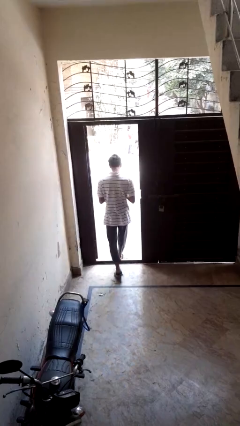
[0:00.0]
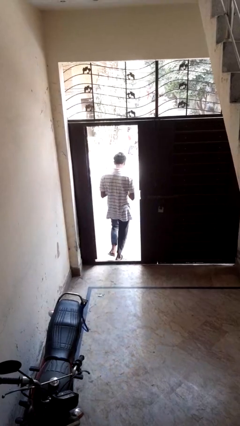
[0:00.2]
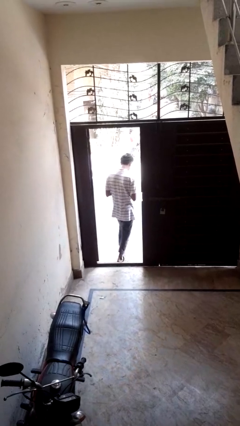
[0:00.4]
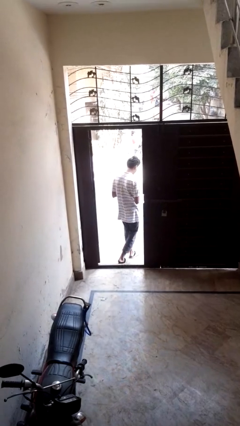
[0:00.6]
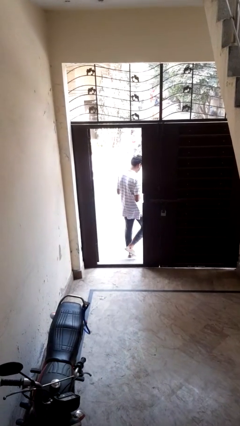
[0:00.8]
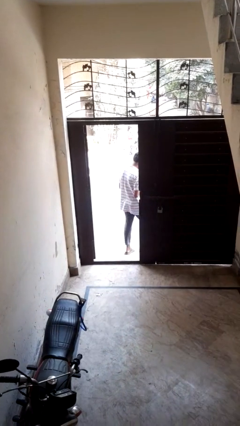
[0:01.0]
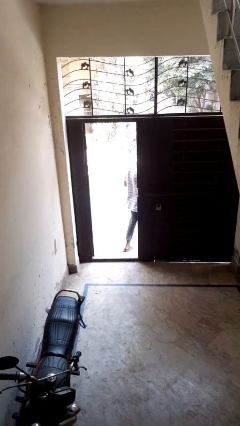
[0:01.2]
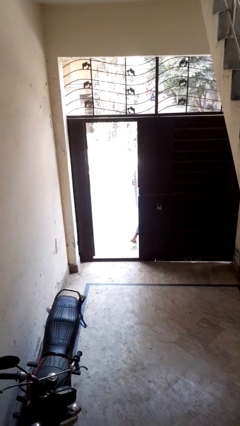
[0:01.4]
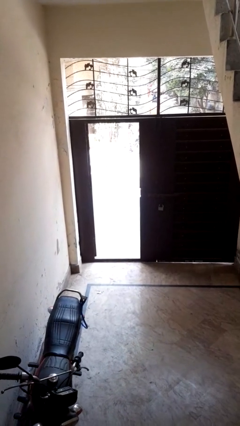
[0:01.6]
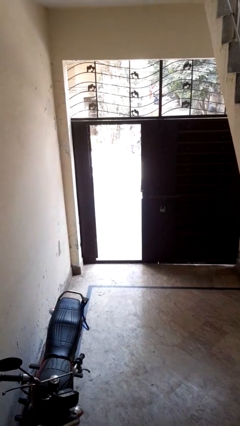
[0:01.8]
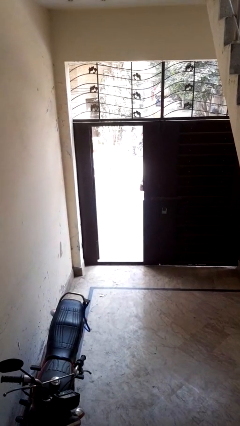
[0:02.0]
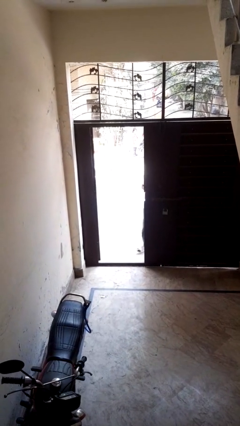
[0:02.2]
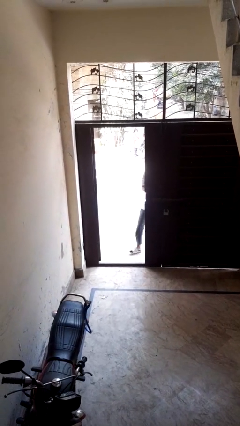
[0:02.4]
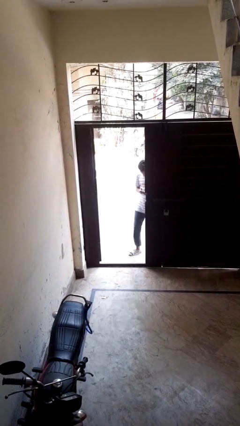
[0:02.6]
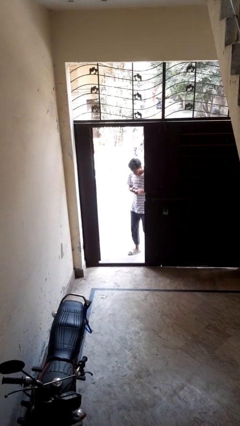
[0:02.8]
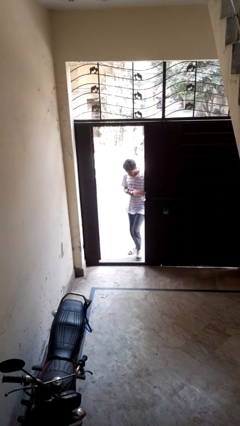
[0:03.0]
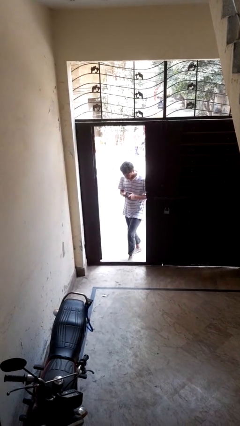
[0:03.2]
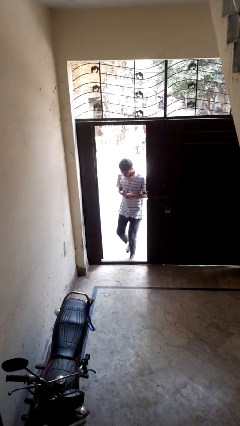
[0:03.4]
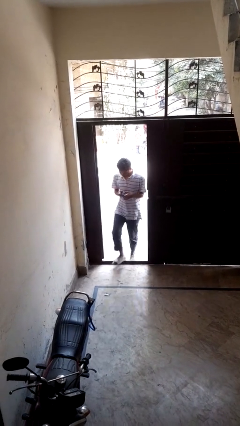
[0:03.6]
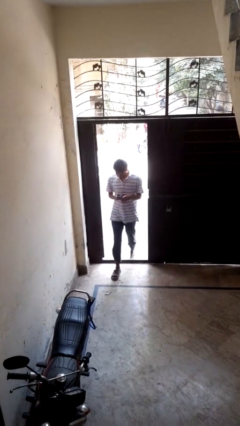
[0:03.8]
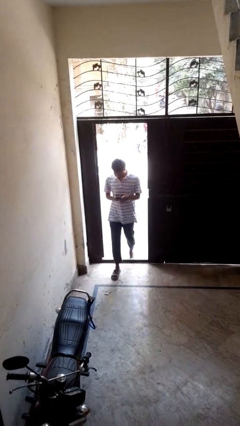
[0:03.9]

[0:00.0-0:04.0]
person exits scene through structure

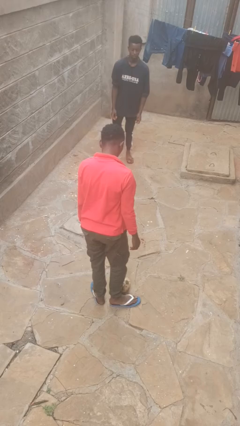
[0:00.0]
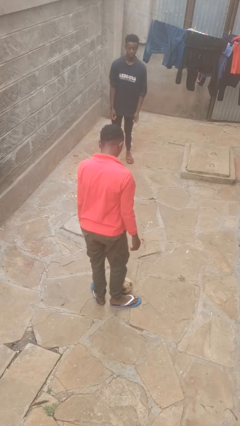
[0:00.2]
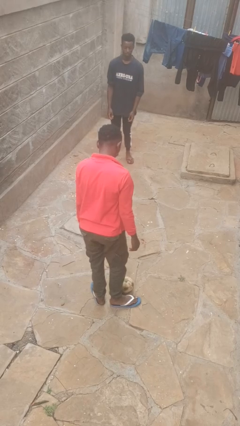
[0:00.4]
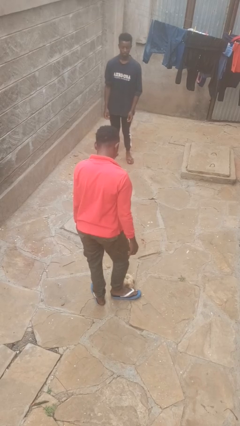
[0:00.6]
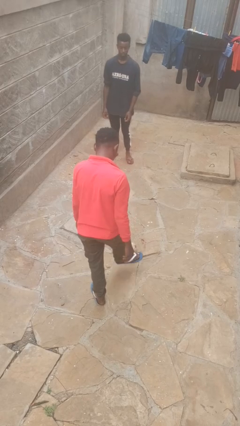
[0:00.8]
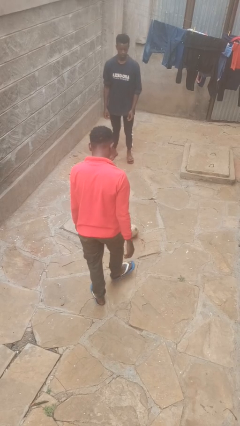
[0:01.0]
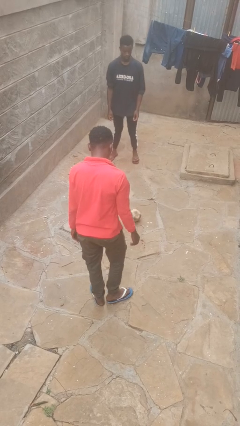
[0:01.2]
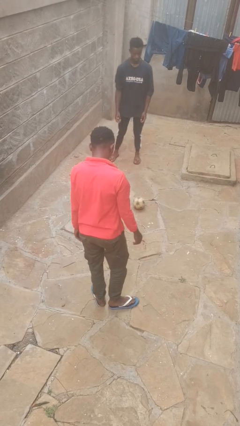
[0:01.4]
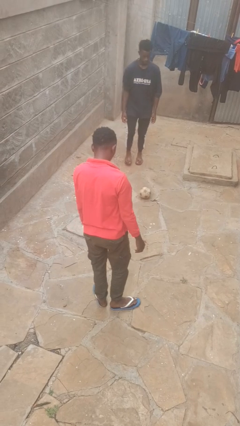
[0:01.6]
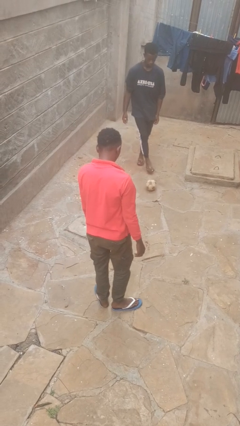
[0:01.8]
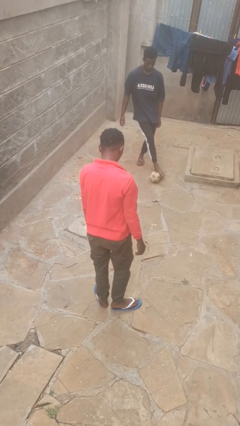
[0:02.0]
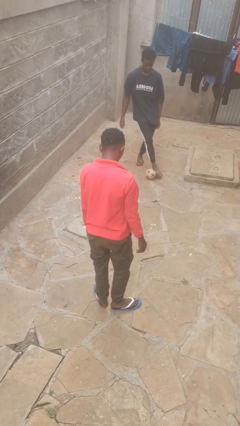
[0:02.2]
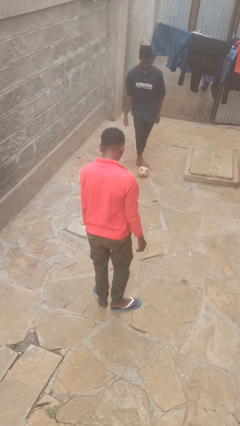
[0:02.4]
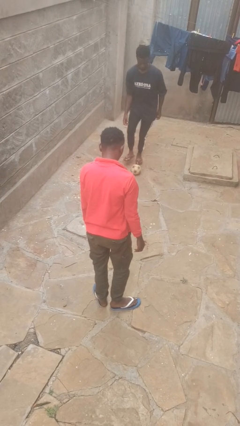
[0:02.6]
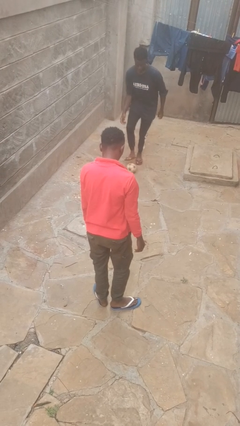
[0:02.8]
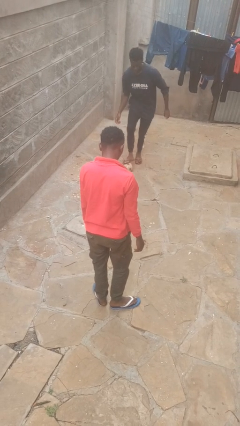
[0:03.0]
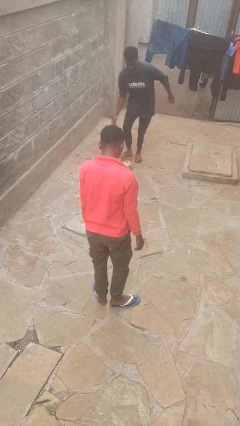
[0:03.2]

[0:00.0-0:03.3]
person kicks object to person

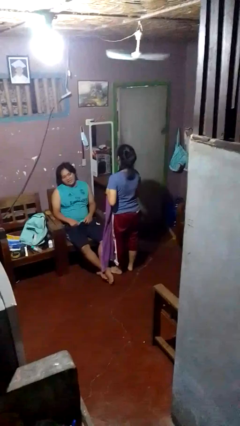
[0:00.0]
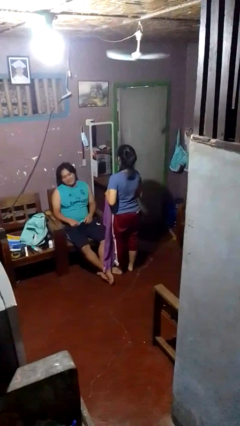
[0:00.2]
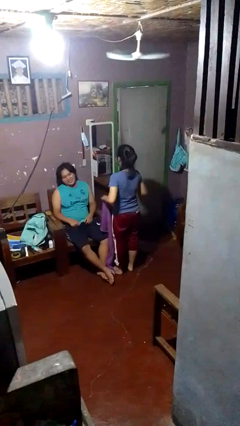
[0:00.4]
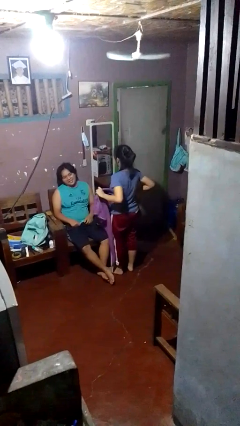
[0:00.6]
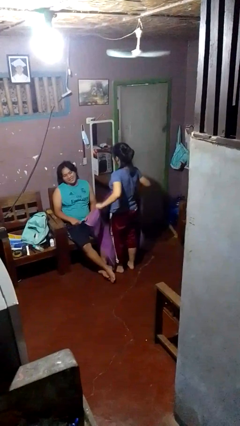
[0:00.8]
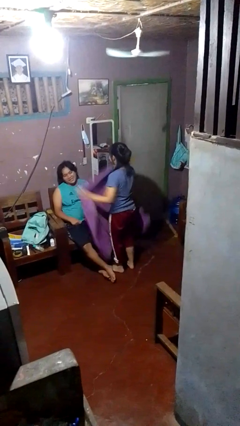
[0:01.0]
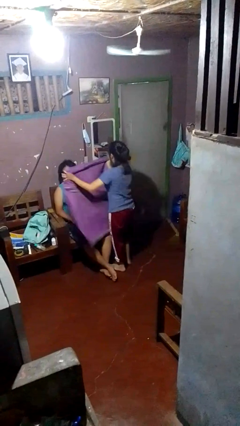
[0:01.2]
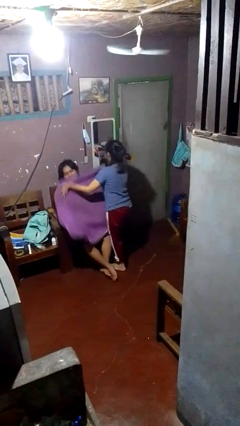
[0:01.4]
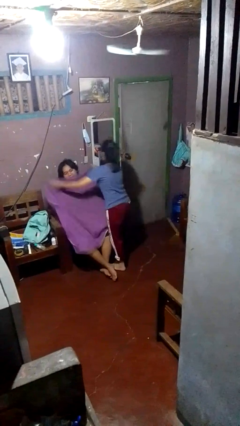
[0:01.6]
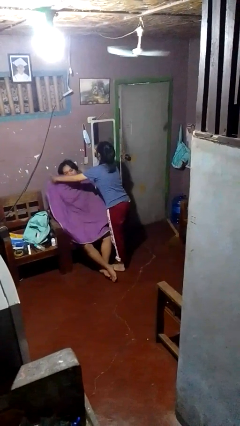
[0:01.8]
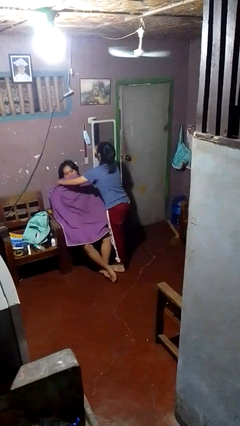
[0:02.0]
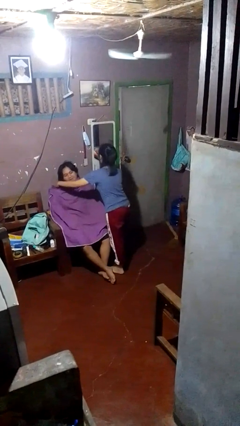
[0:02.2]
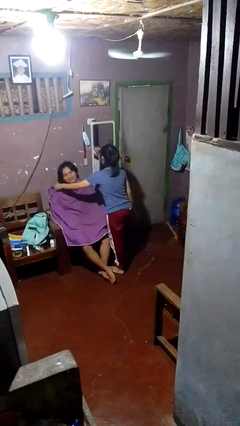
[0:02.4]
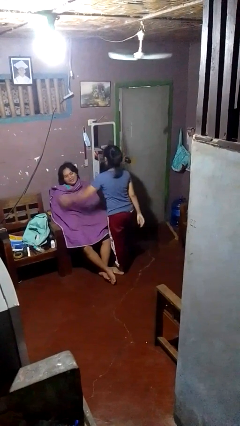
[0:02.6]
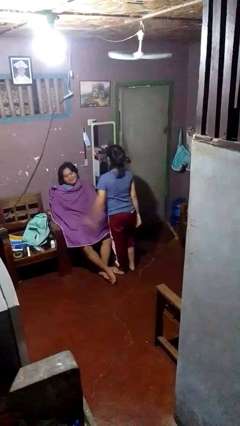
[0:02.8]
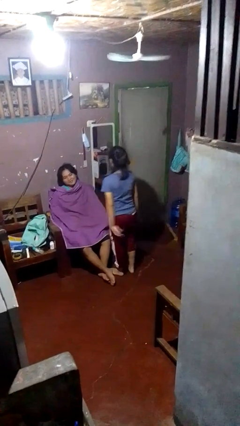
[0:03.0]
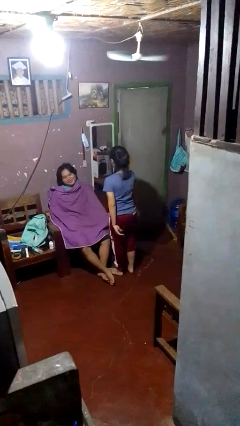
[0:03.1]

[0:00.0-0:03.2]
person covers friend with blanket

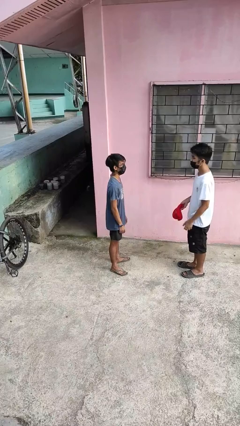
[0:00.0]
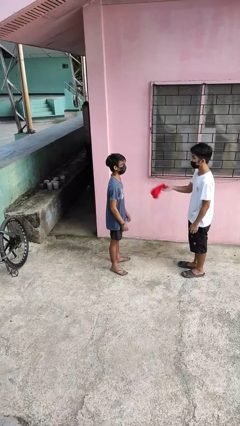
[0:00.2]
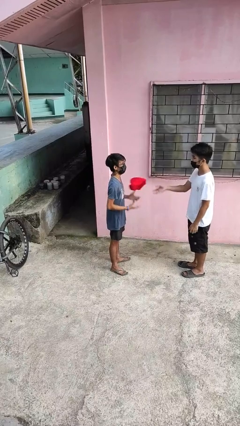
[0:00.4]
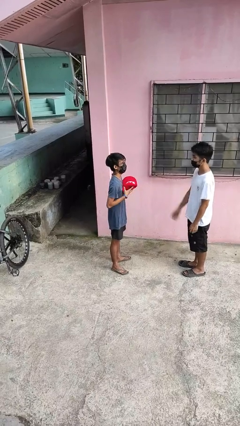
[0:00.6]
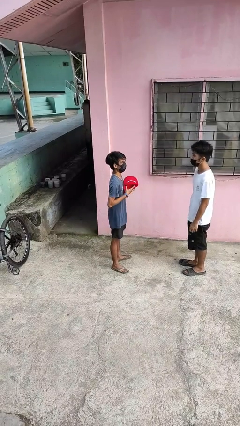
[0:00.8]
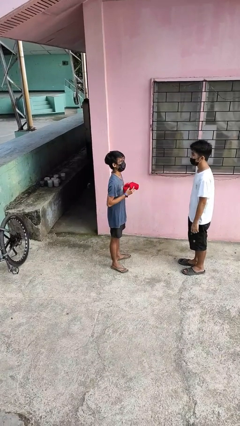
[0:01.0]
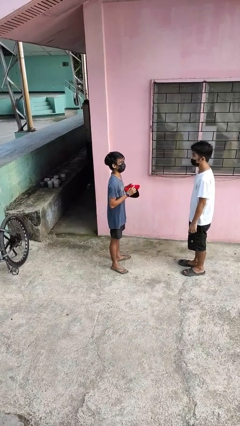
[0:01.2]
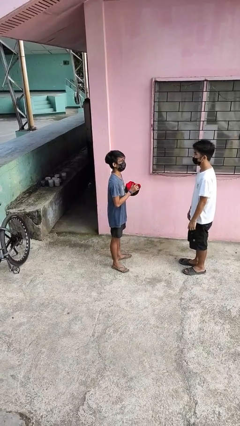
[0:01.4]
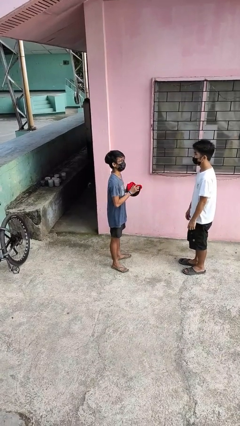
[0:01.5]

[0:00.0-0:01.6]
person catches object from person

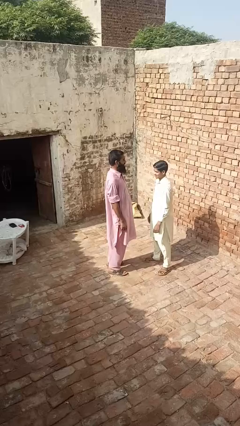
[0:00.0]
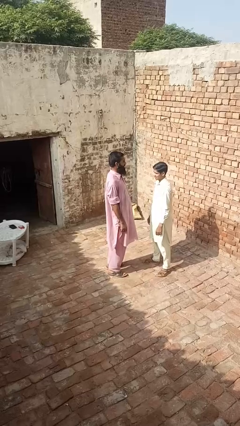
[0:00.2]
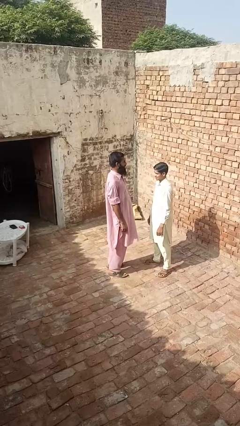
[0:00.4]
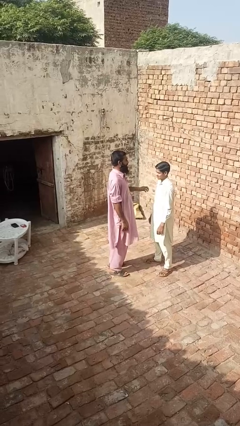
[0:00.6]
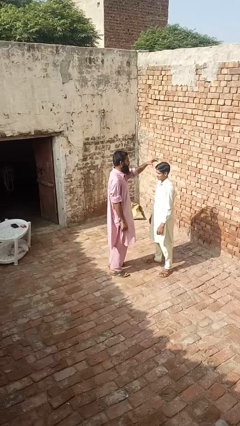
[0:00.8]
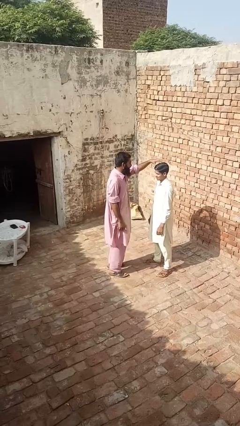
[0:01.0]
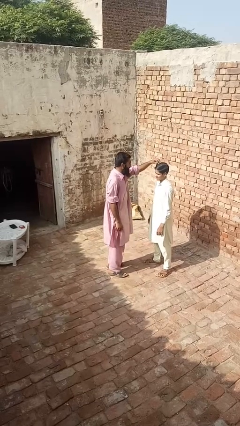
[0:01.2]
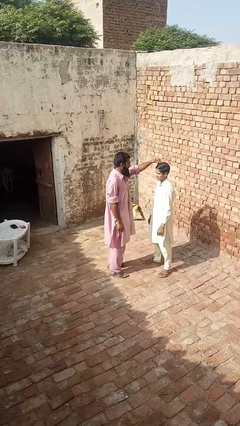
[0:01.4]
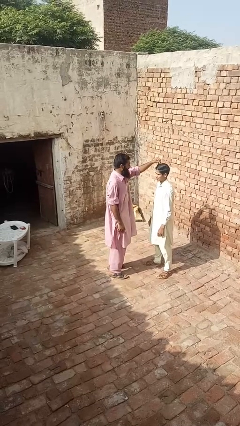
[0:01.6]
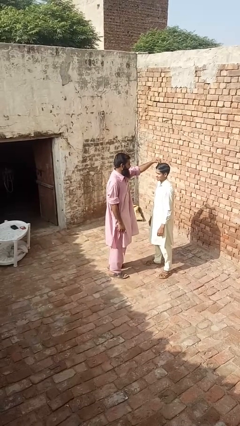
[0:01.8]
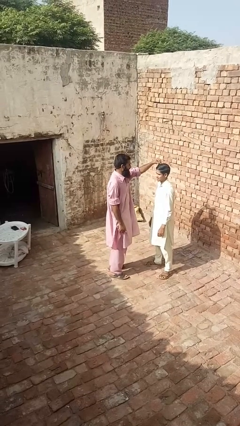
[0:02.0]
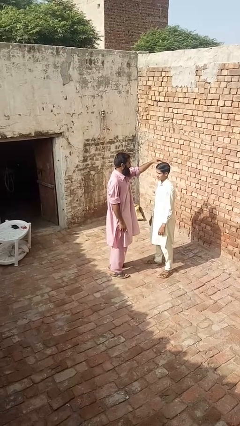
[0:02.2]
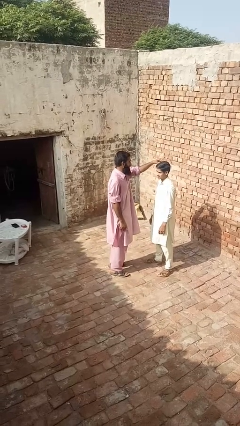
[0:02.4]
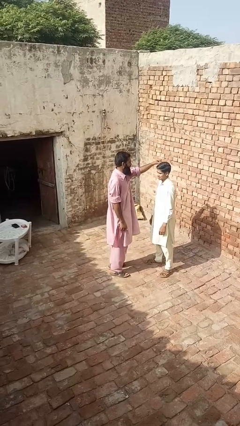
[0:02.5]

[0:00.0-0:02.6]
person grabs person by hair

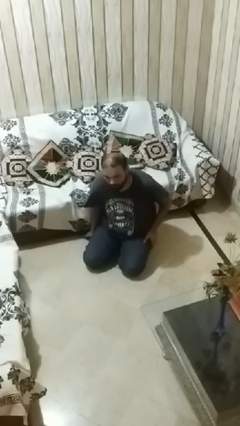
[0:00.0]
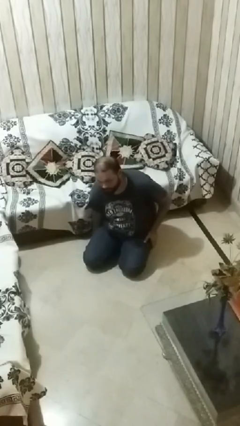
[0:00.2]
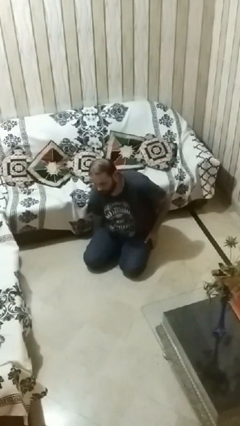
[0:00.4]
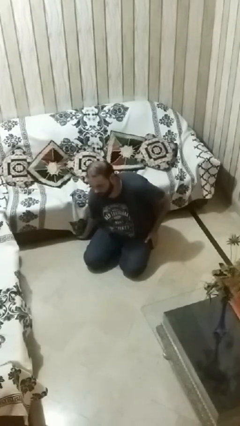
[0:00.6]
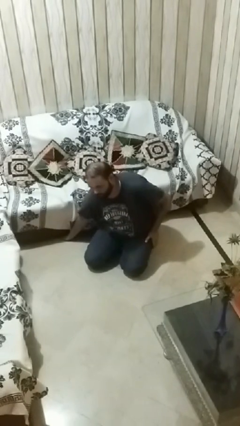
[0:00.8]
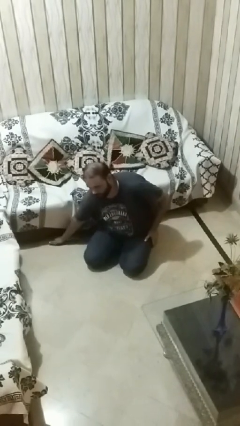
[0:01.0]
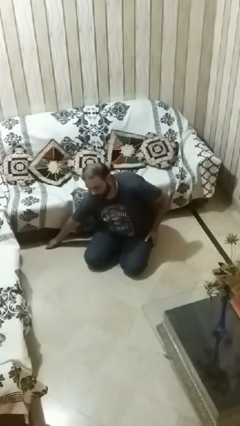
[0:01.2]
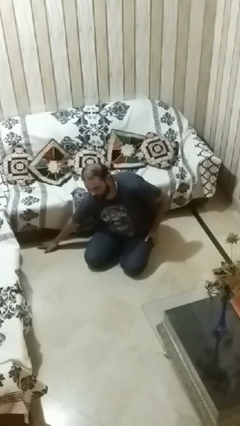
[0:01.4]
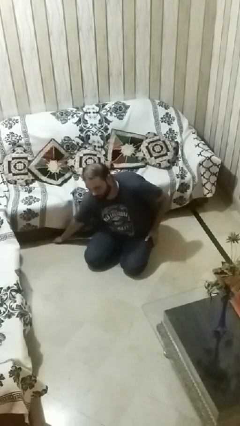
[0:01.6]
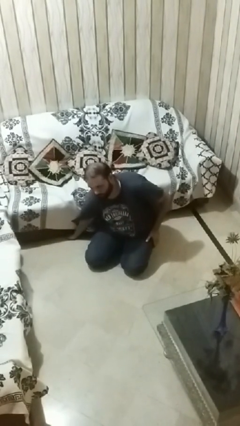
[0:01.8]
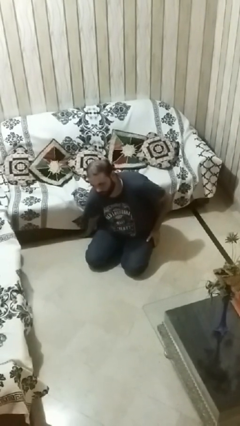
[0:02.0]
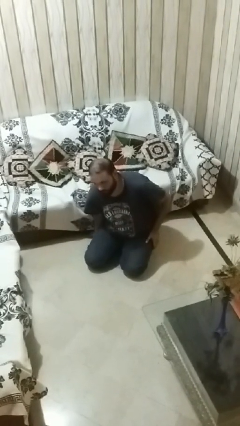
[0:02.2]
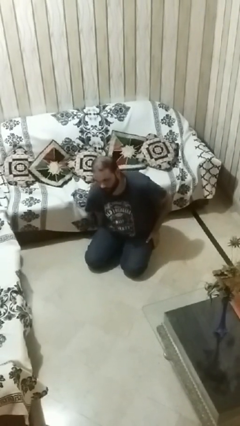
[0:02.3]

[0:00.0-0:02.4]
person searches under couch

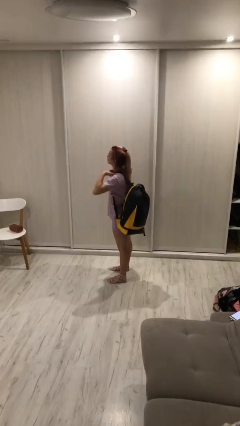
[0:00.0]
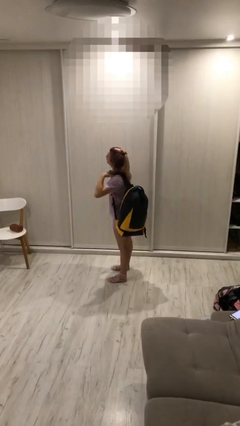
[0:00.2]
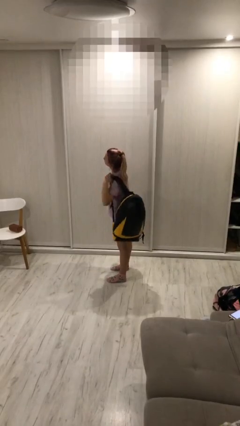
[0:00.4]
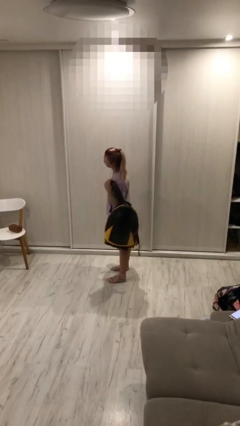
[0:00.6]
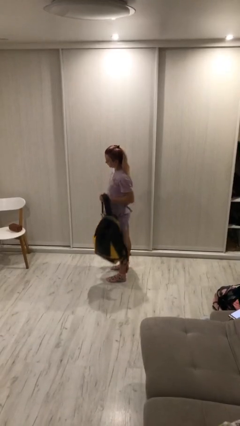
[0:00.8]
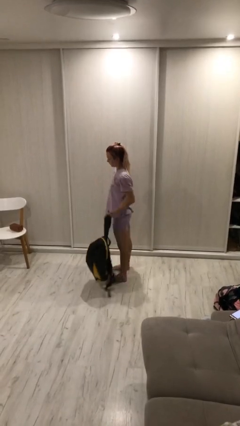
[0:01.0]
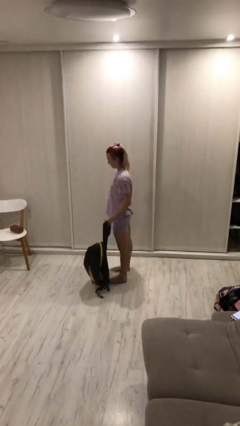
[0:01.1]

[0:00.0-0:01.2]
person takes off backpack
